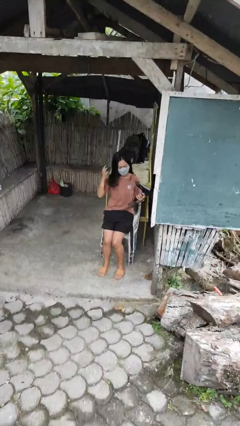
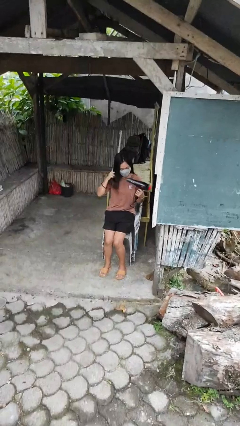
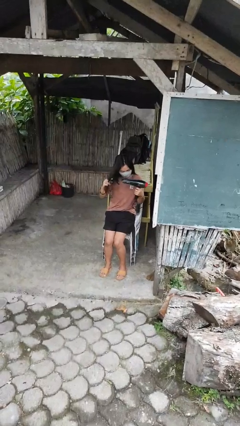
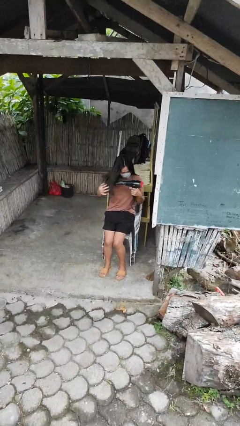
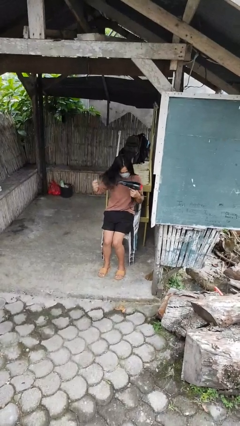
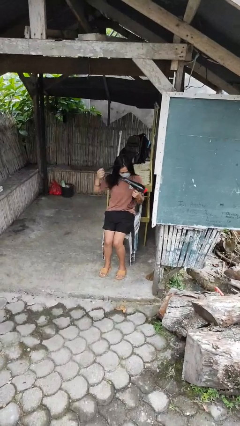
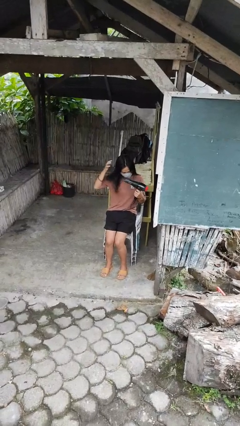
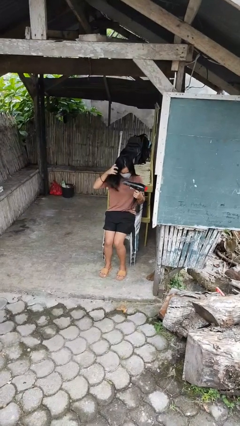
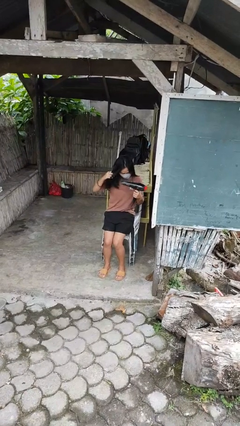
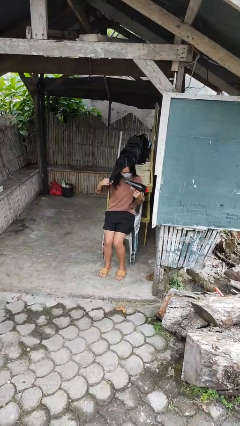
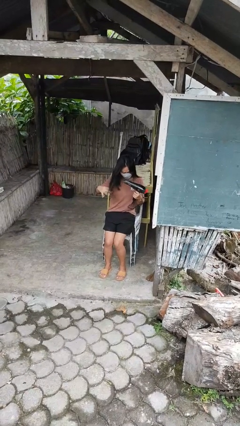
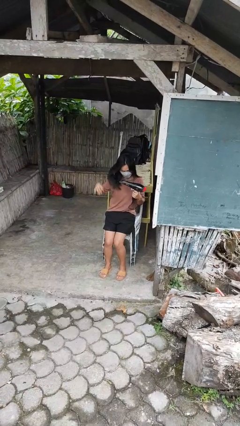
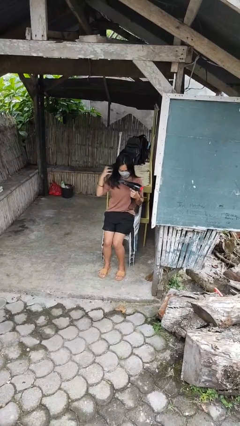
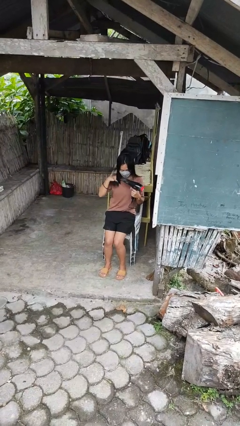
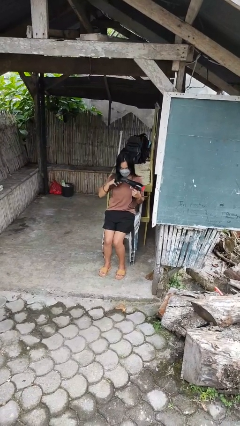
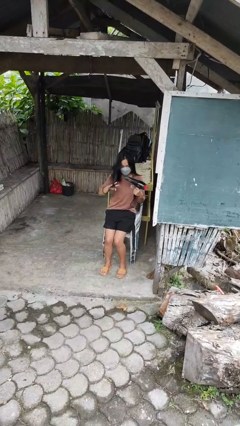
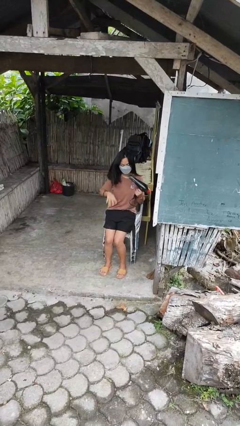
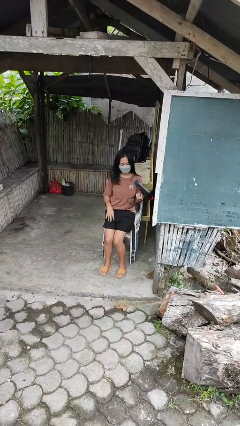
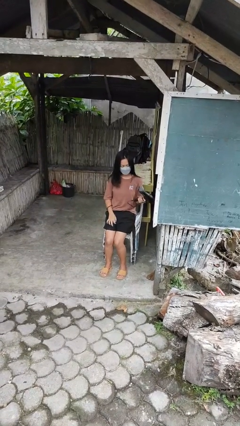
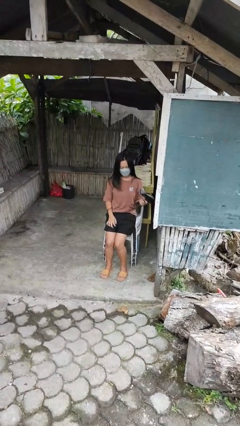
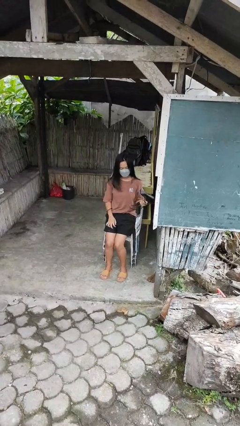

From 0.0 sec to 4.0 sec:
person dries hair with hairdryer

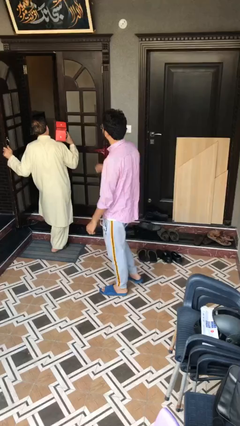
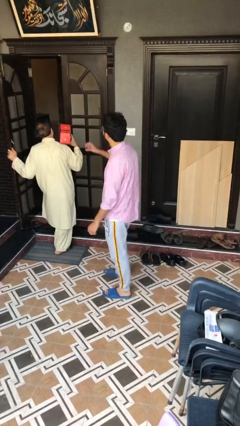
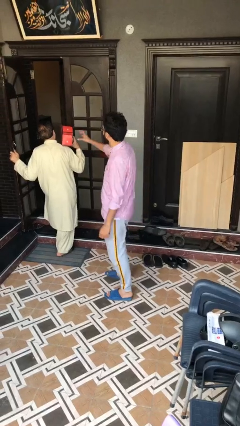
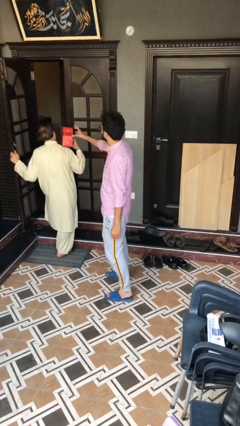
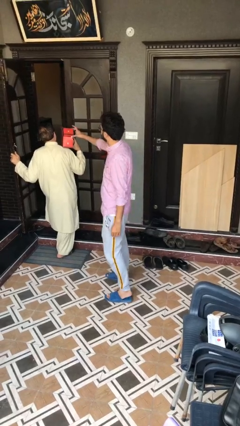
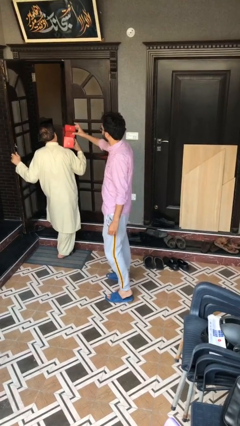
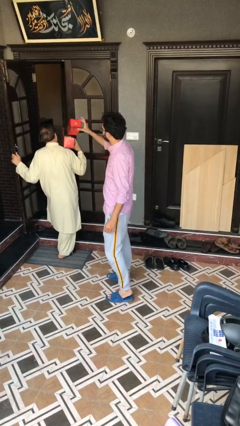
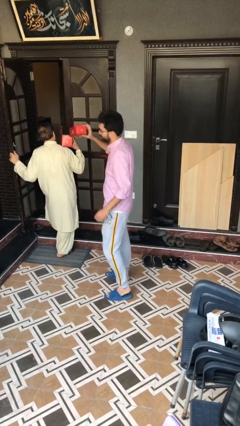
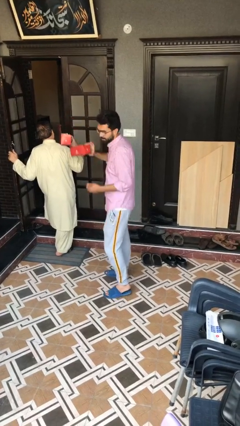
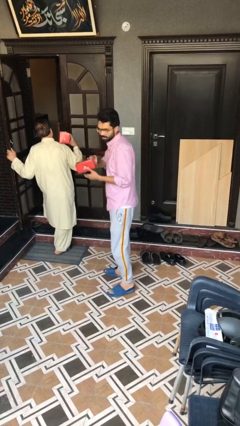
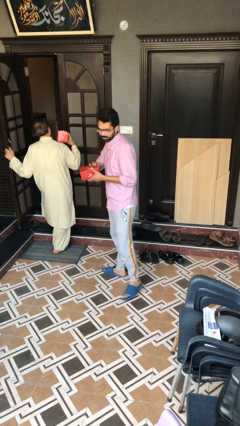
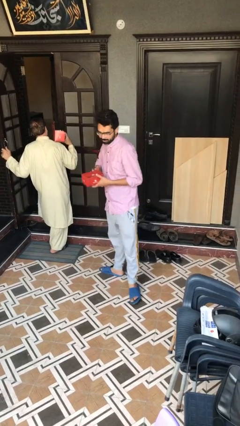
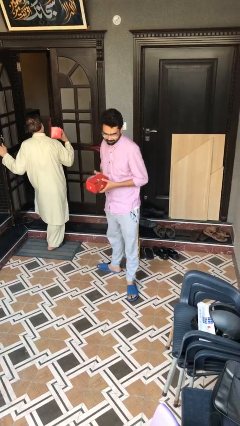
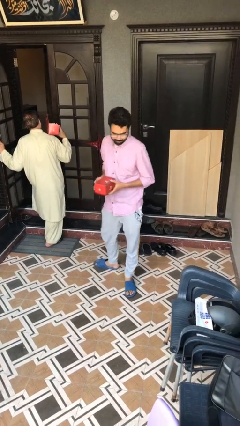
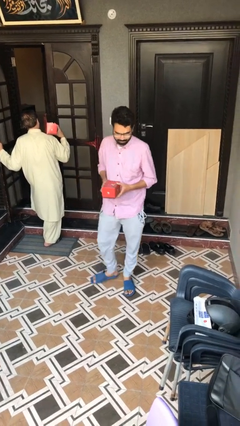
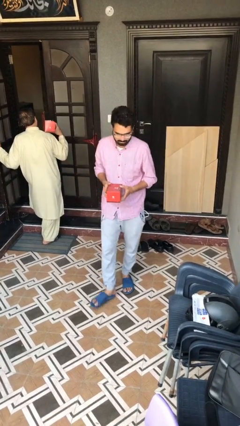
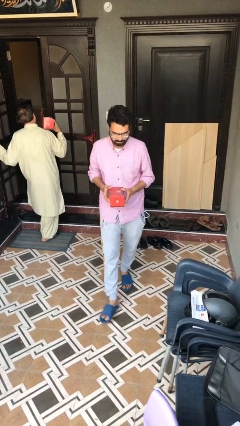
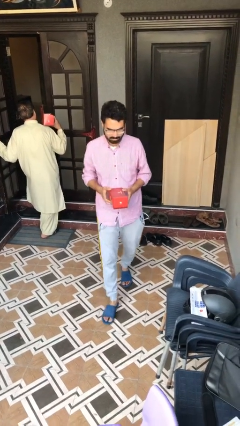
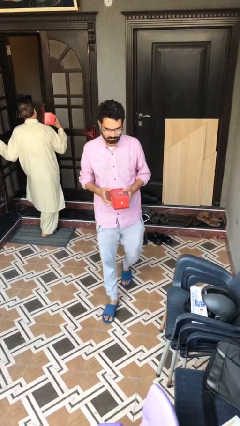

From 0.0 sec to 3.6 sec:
person steals object from person

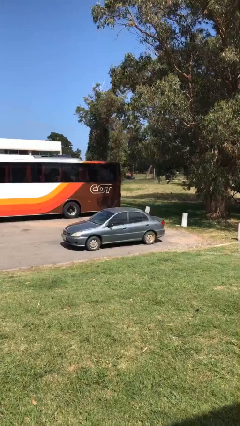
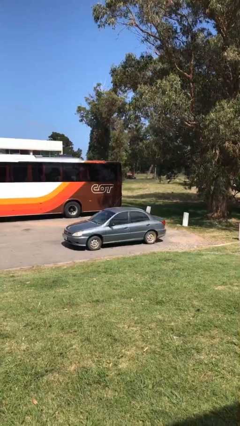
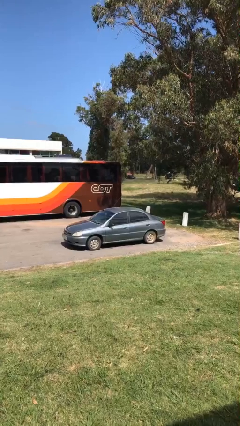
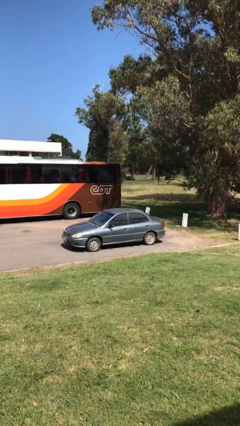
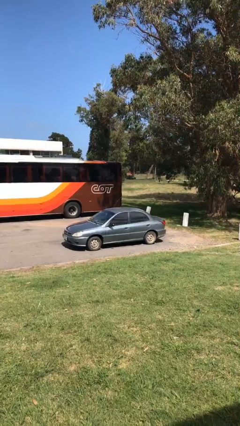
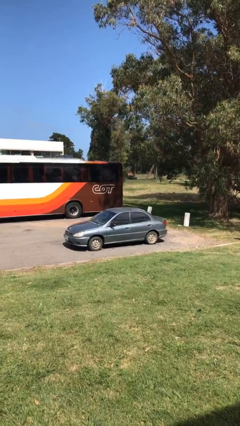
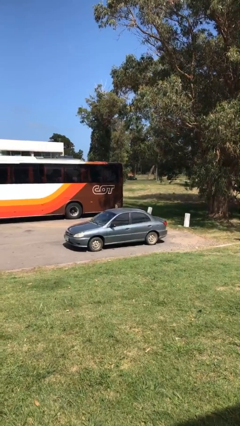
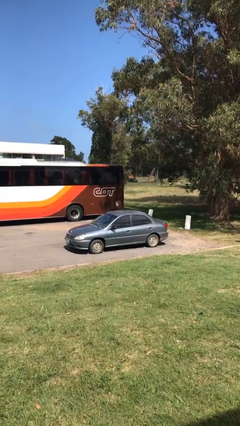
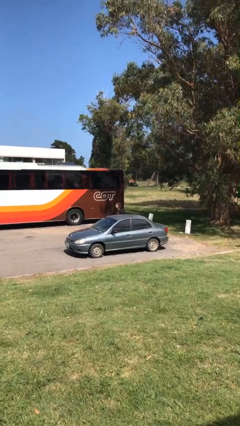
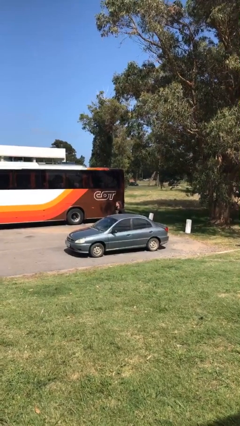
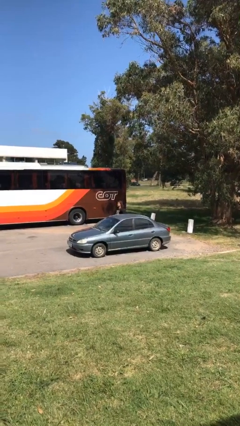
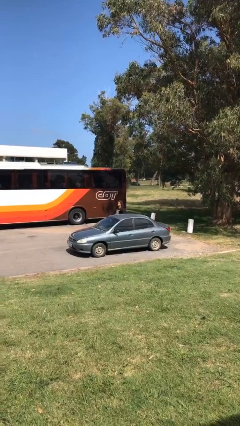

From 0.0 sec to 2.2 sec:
person exits car

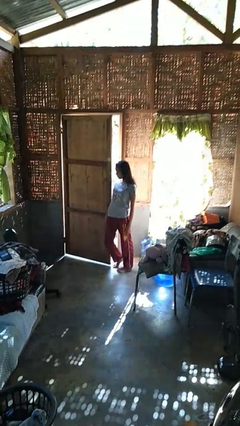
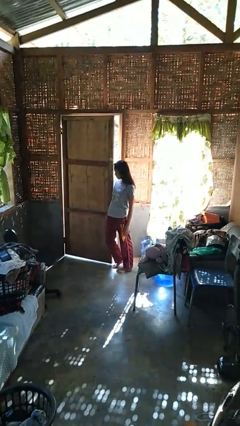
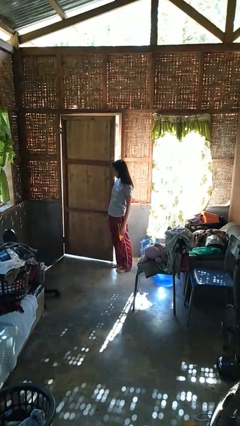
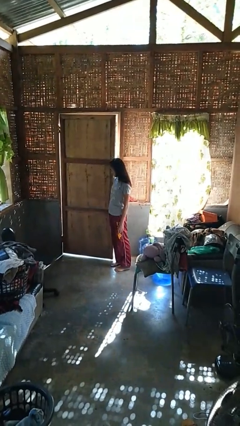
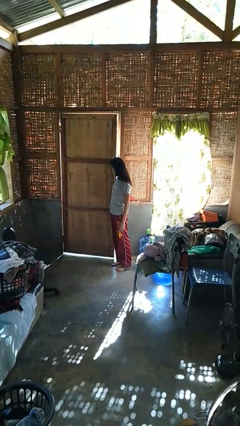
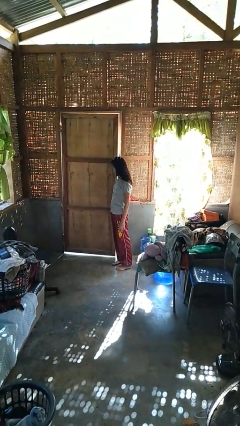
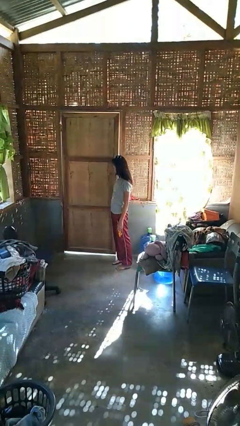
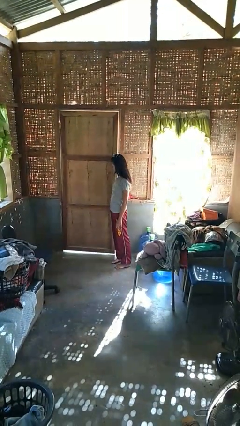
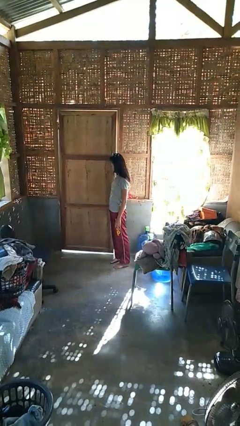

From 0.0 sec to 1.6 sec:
person closes door with hip

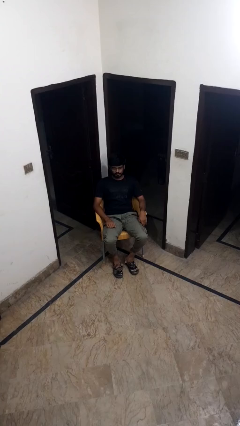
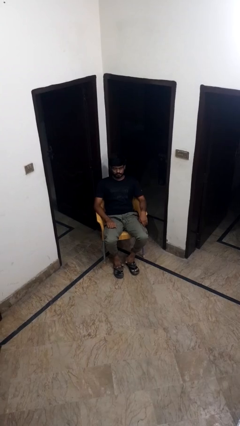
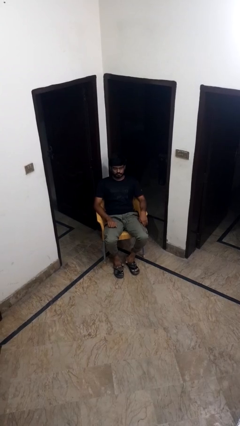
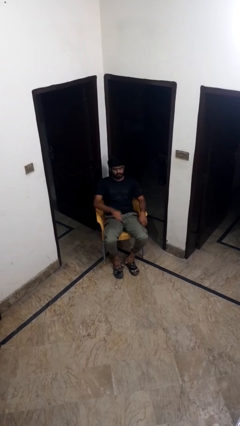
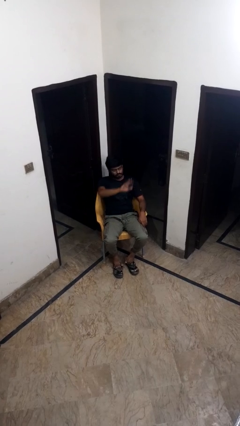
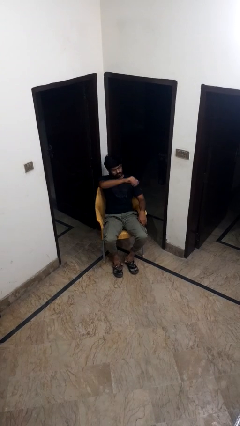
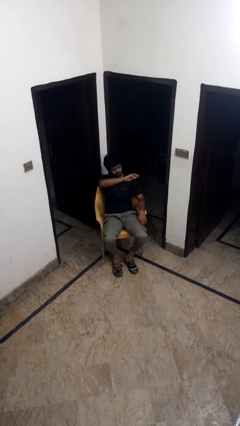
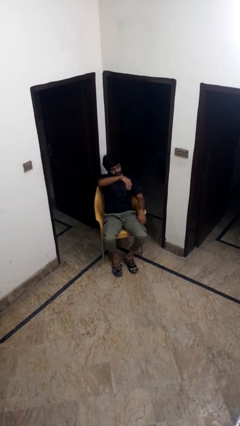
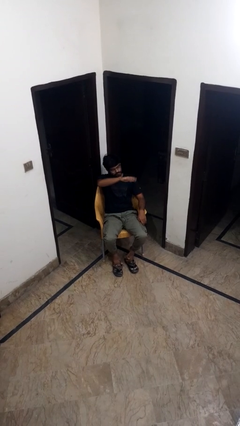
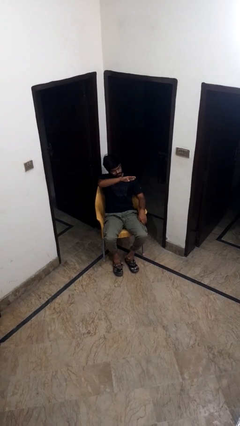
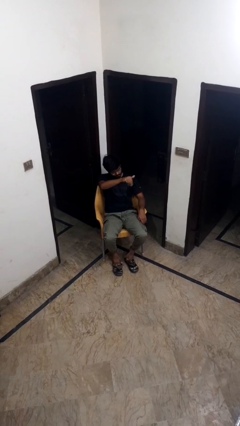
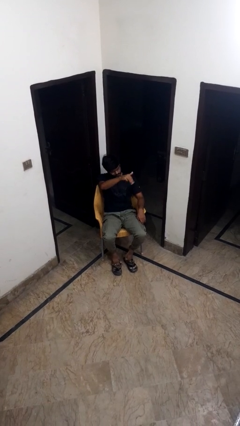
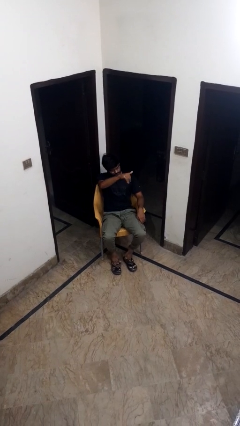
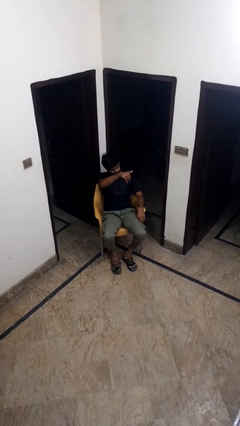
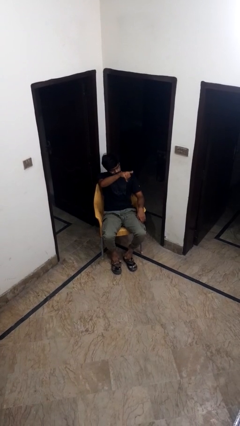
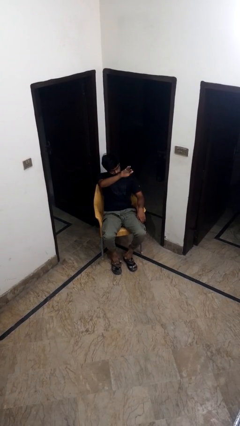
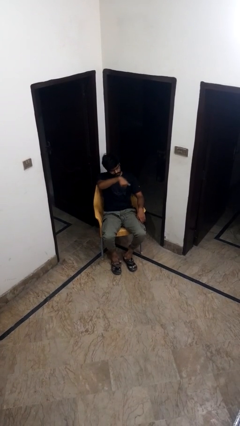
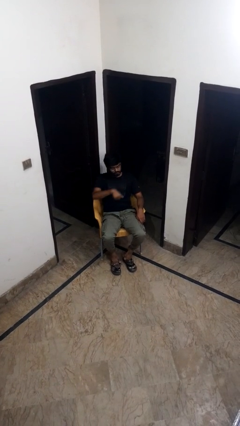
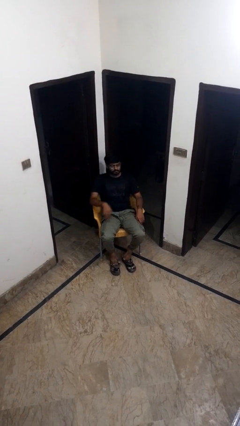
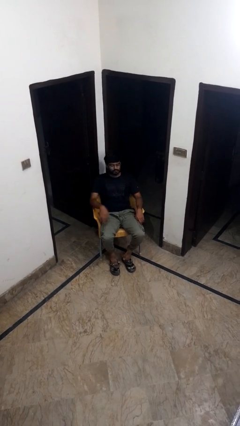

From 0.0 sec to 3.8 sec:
person gestures come here

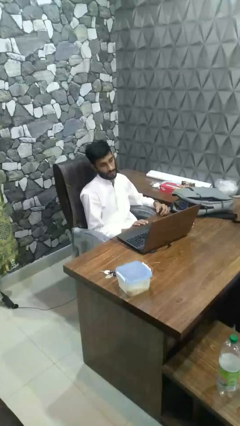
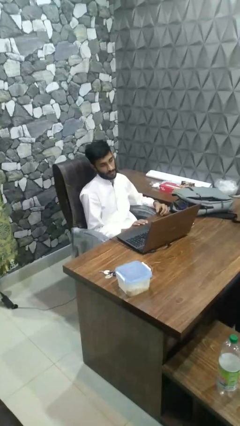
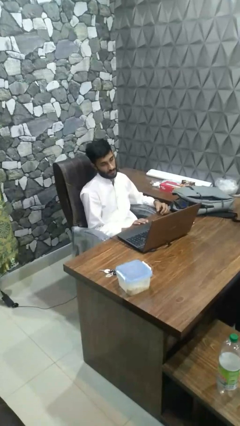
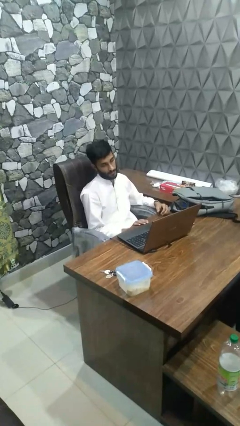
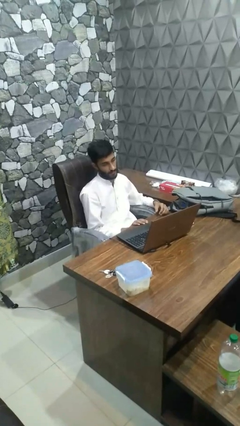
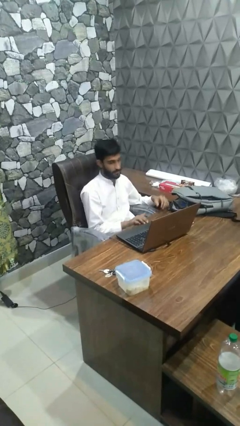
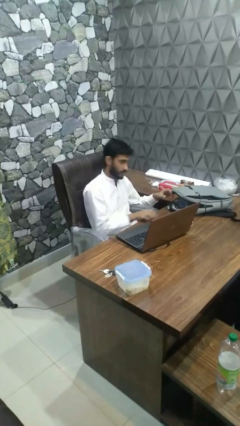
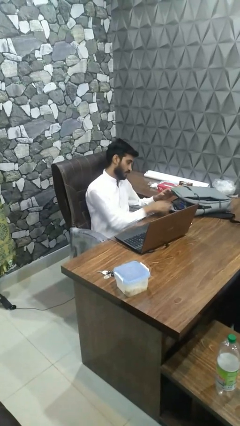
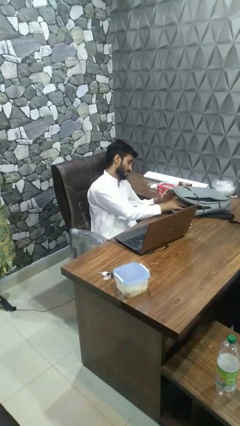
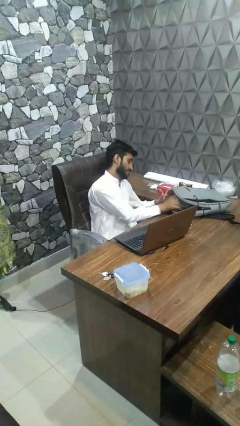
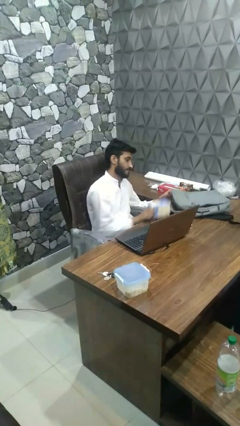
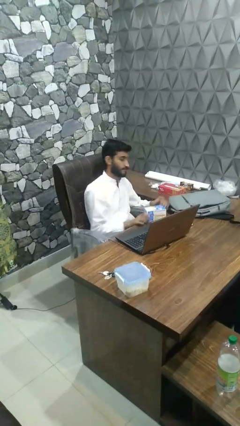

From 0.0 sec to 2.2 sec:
person takes object from bag
